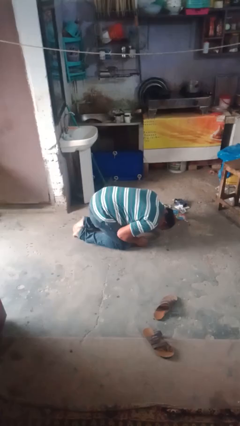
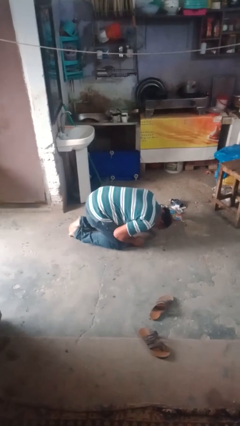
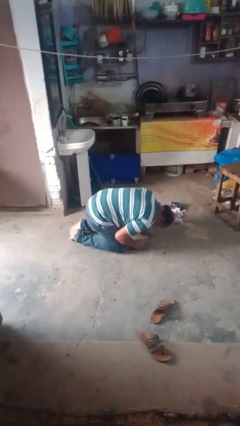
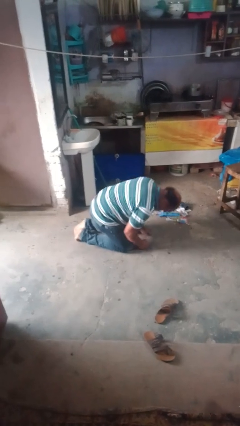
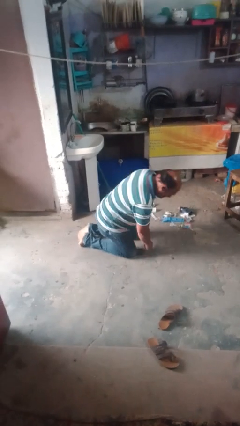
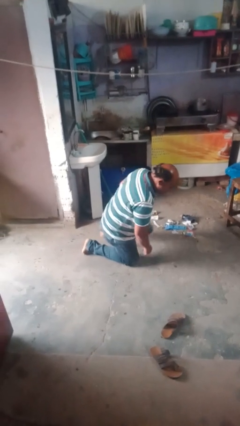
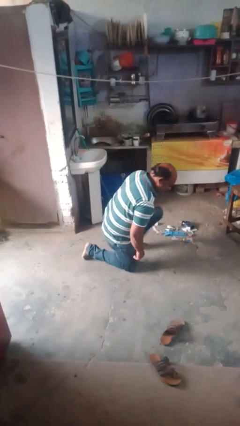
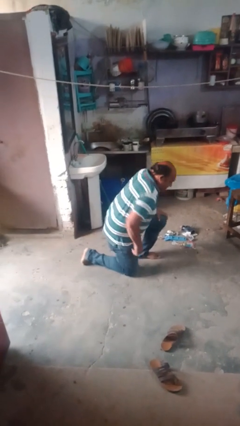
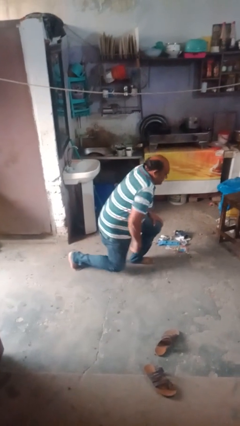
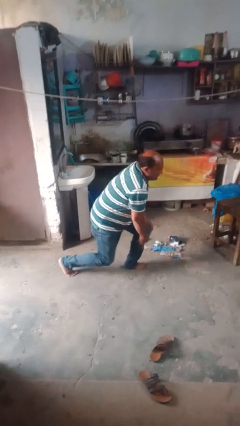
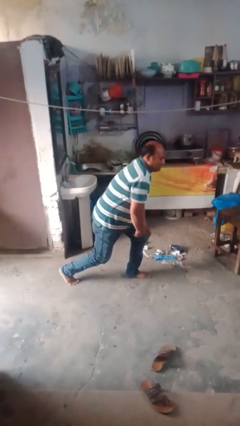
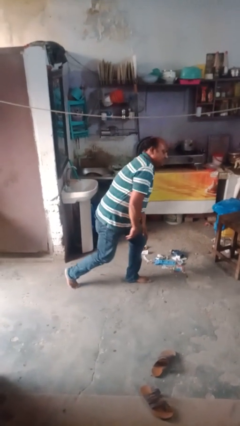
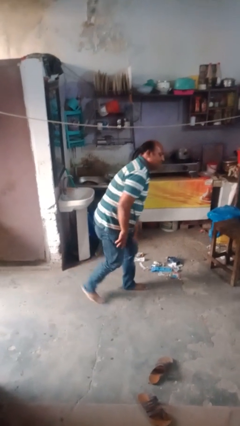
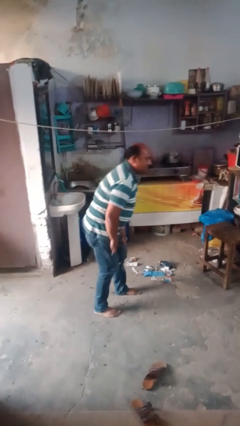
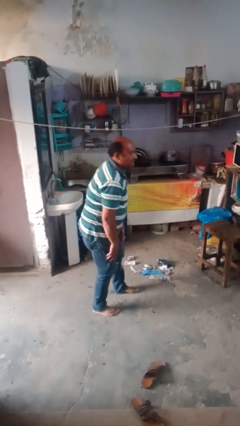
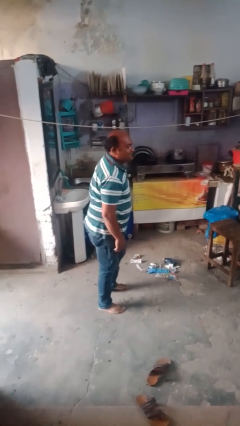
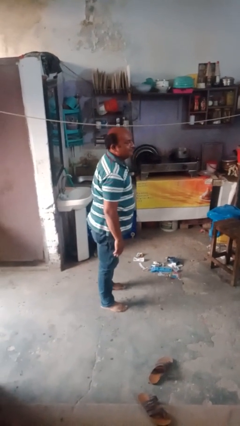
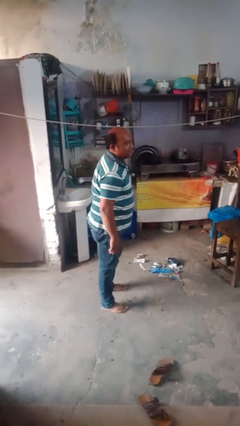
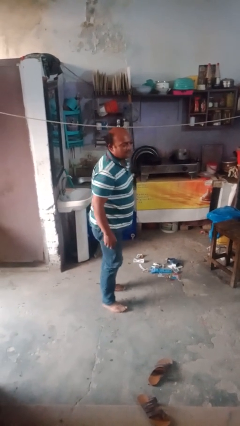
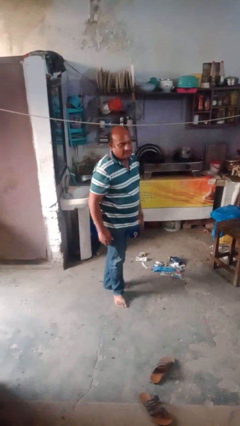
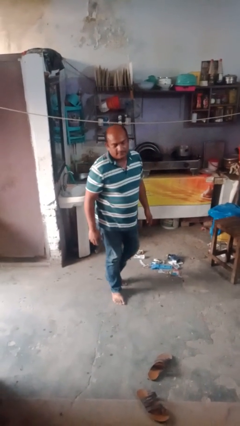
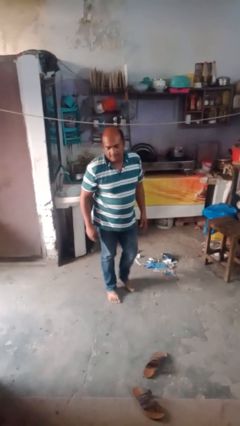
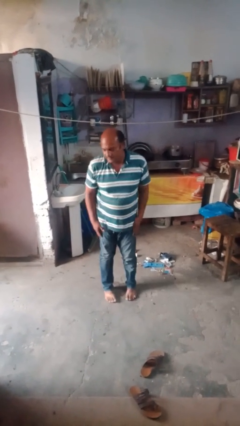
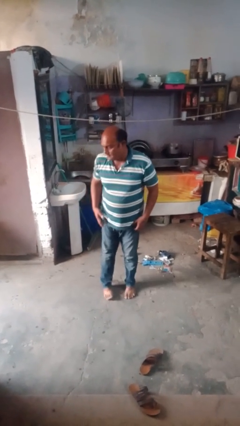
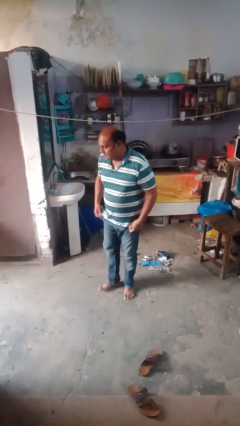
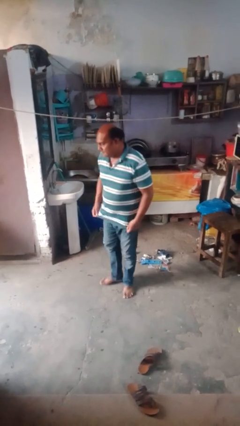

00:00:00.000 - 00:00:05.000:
person stands up from floor

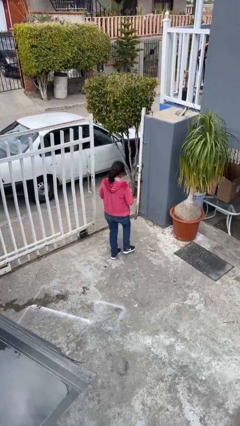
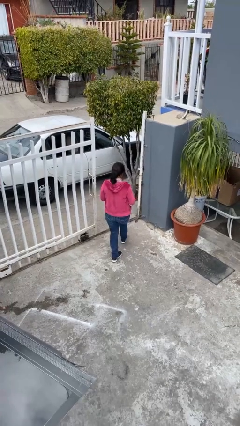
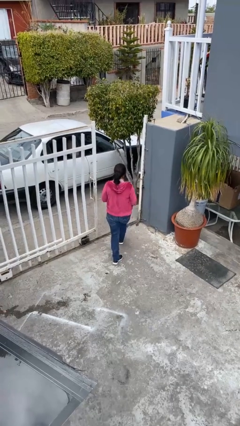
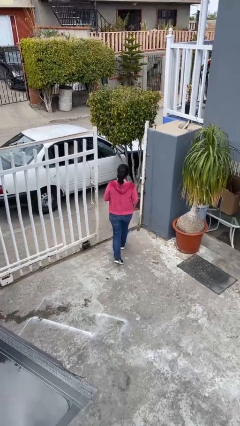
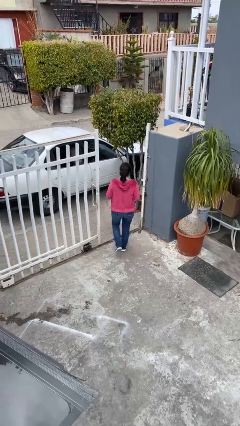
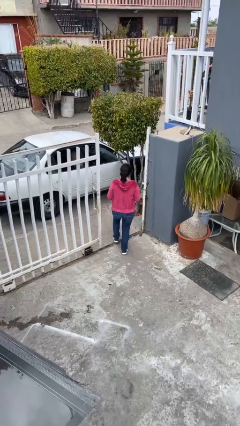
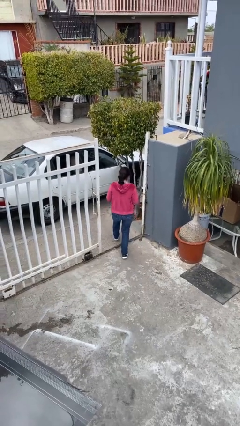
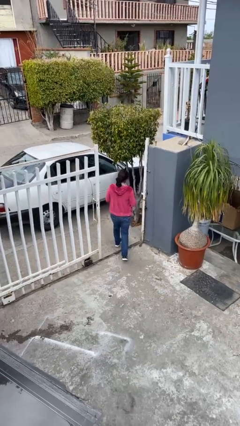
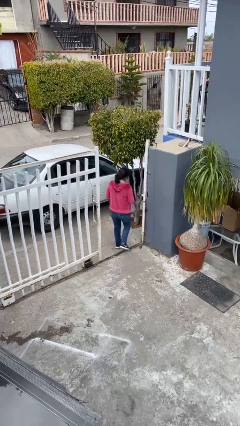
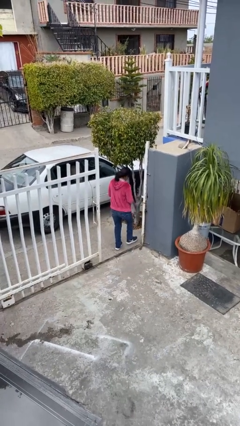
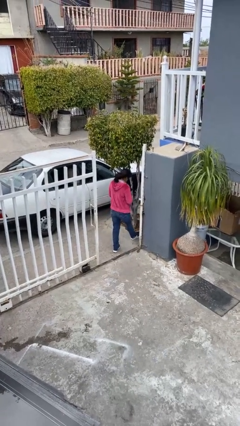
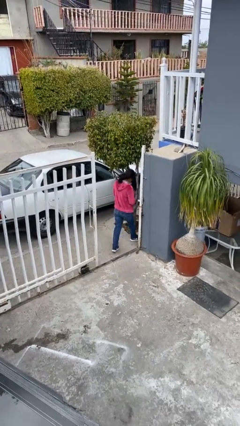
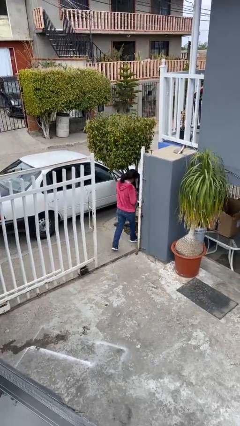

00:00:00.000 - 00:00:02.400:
person exits scene through structure

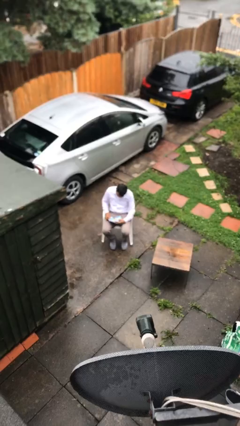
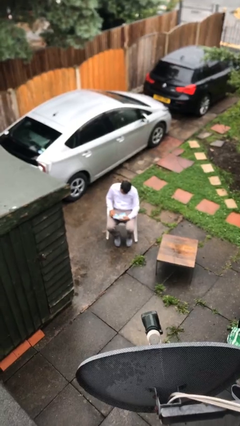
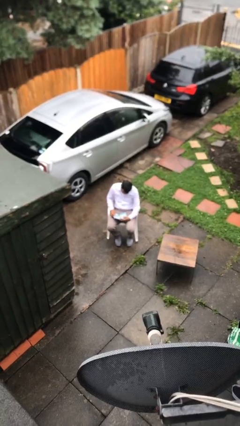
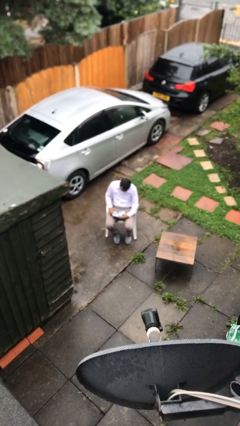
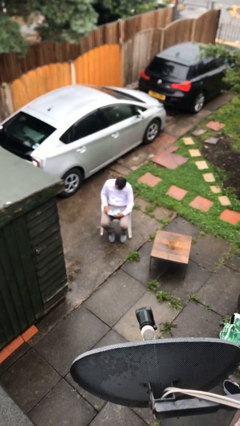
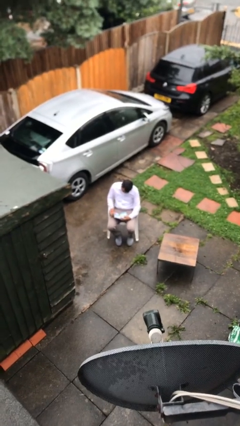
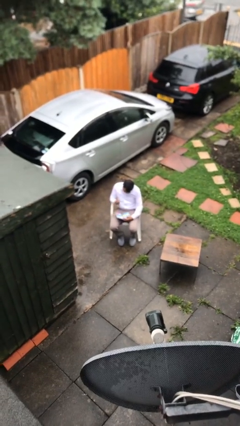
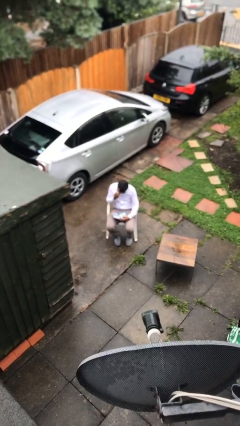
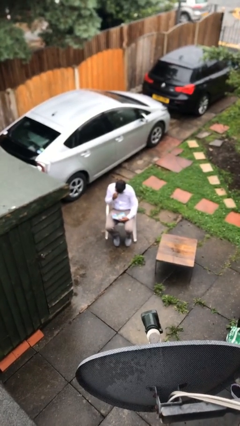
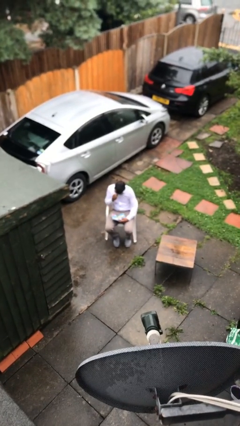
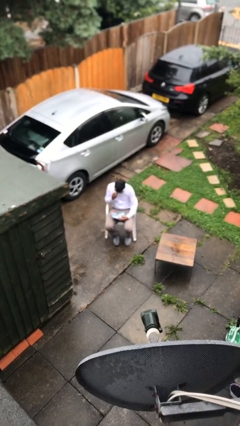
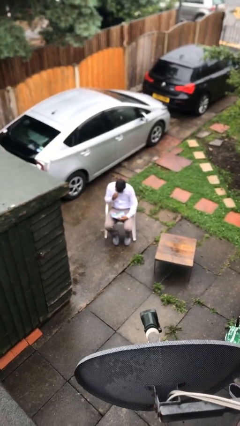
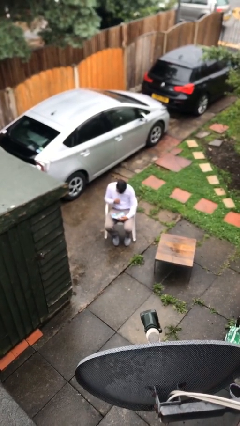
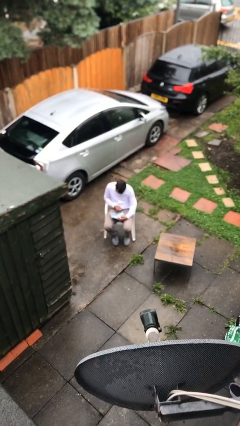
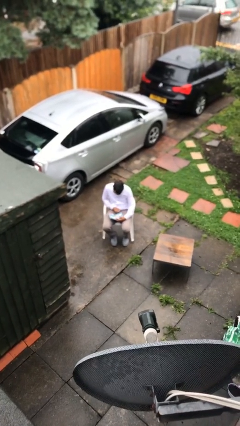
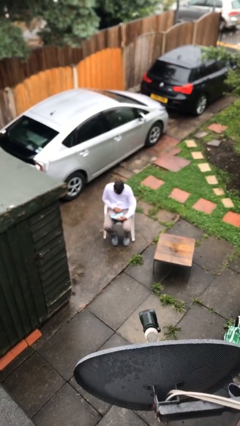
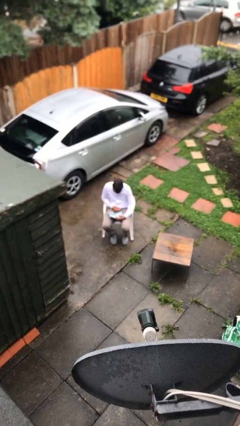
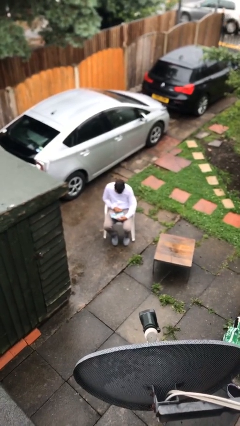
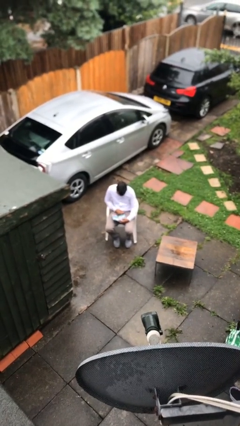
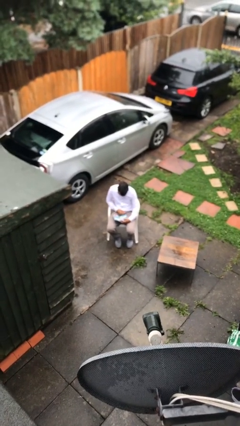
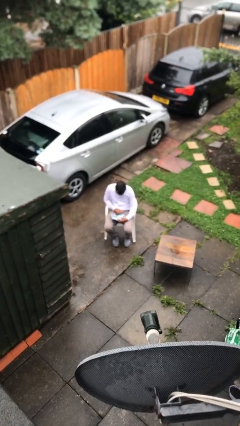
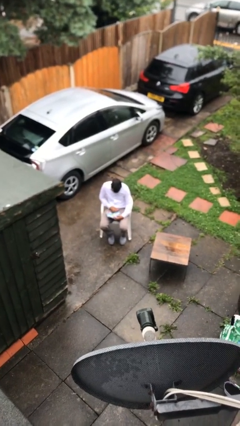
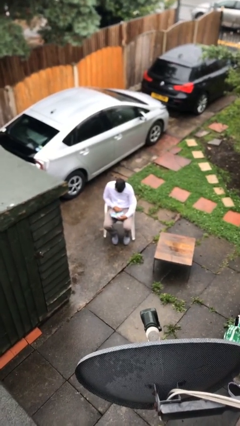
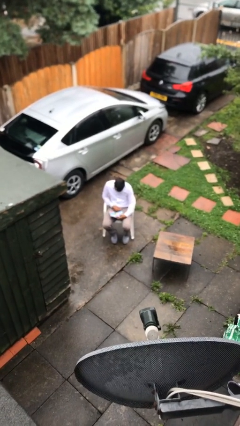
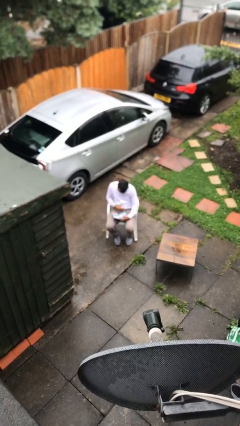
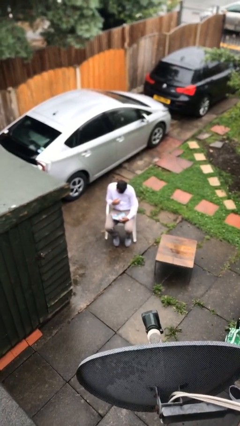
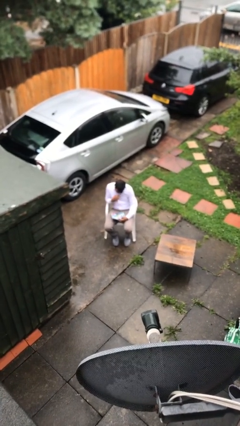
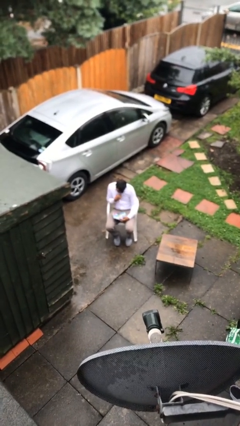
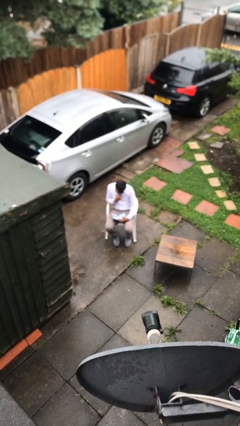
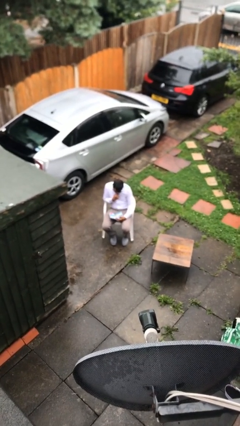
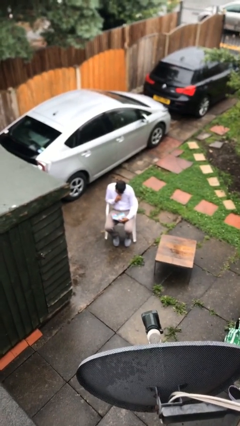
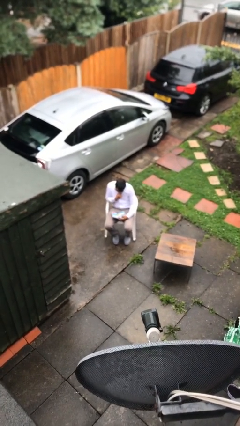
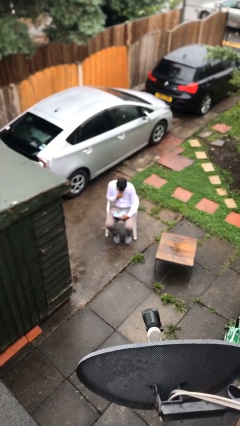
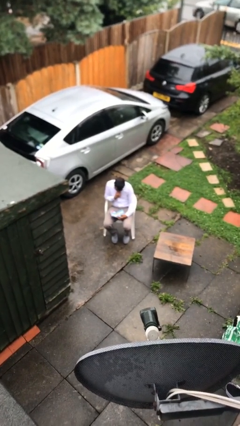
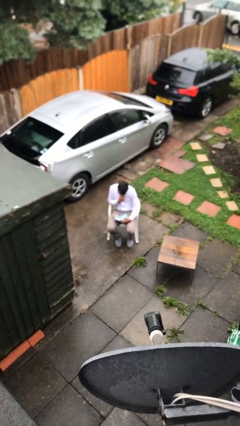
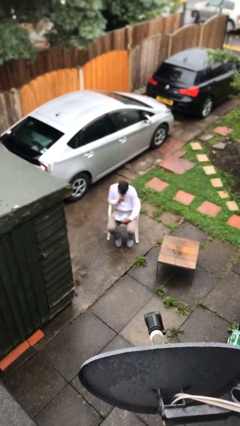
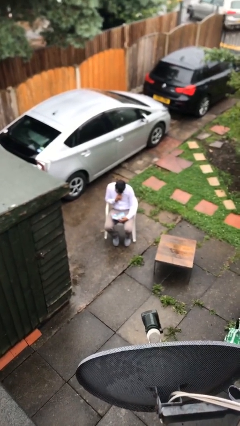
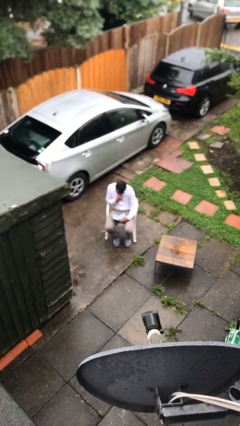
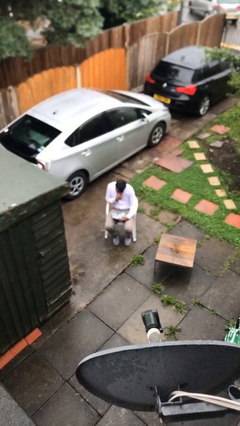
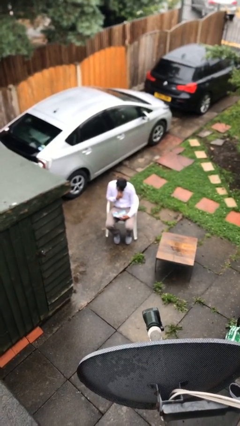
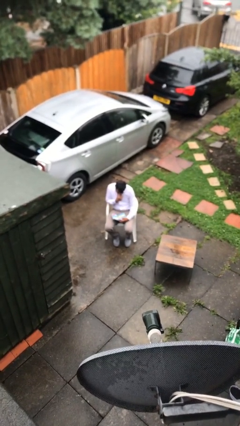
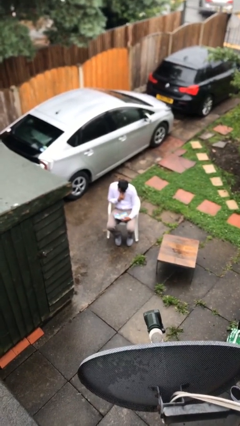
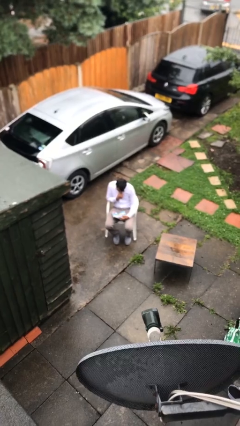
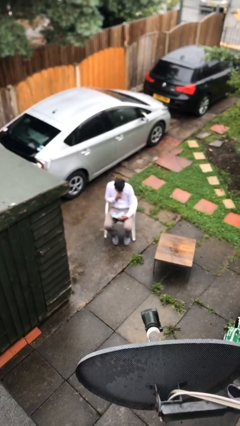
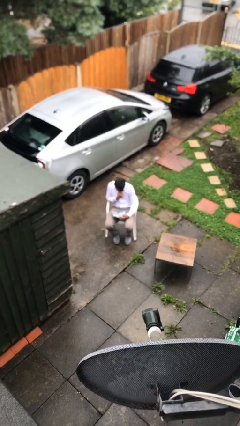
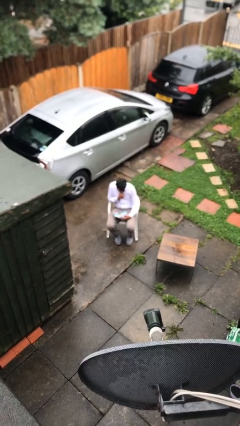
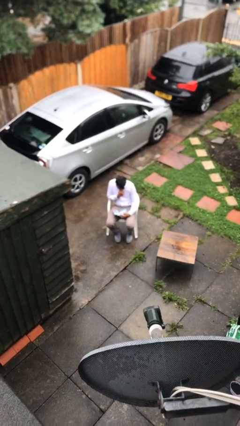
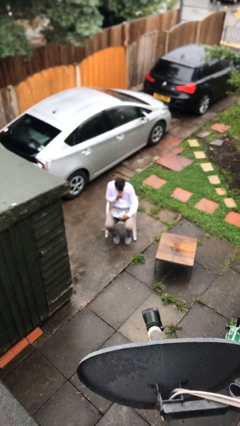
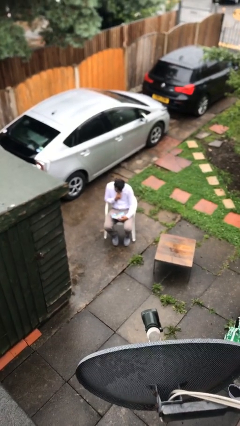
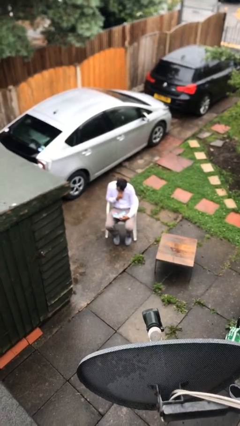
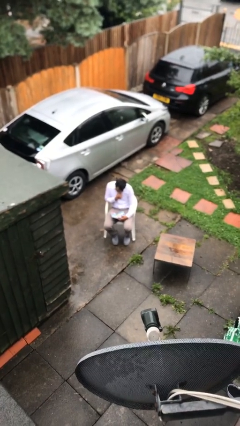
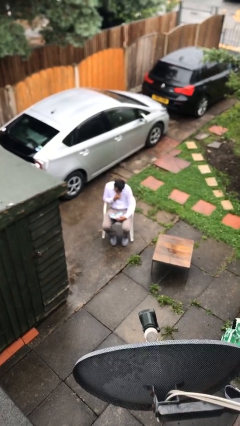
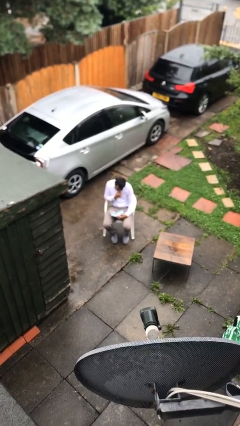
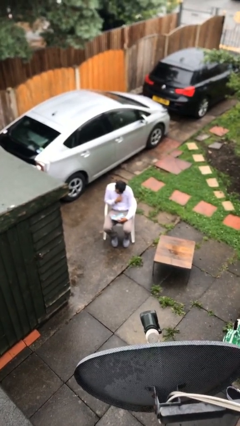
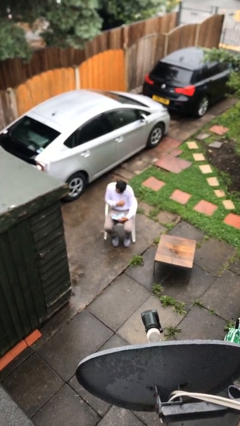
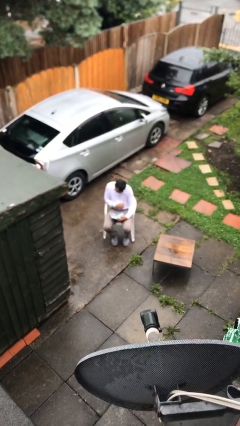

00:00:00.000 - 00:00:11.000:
person reads document
